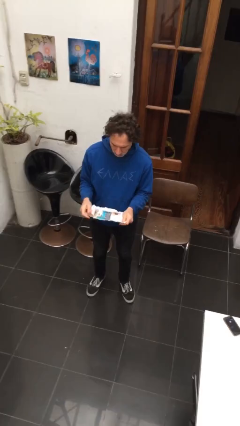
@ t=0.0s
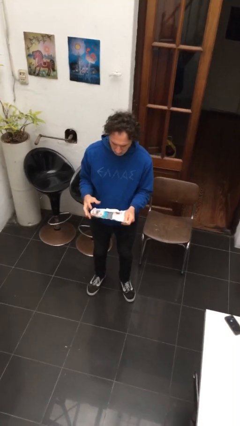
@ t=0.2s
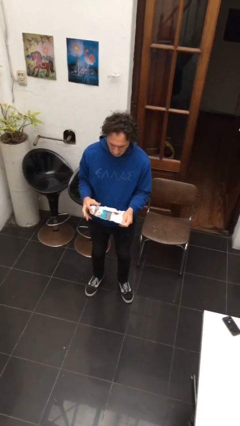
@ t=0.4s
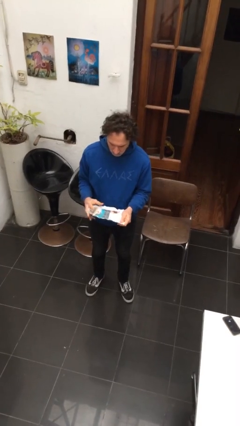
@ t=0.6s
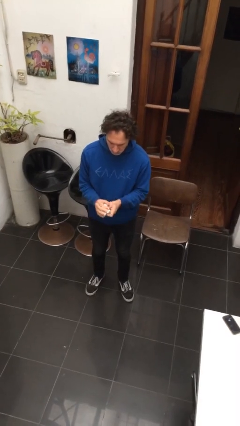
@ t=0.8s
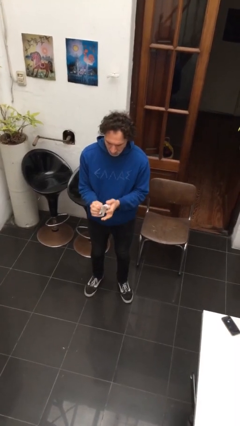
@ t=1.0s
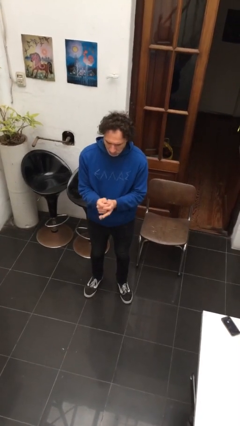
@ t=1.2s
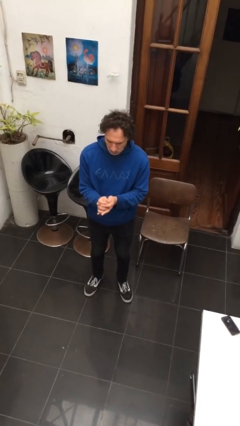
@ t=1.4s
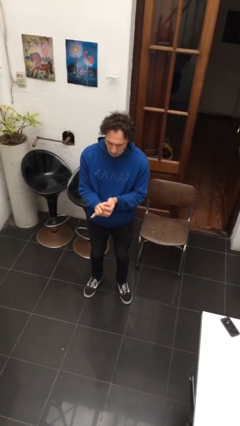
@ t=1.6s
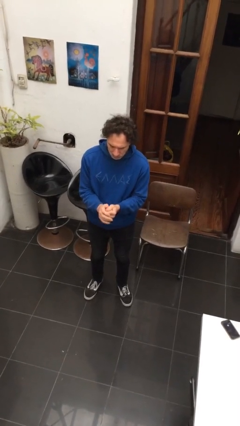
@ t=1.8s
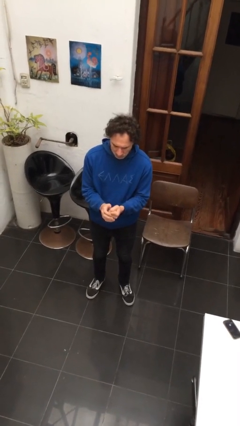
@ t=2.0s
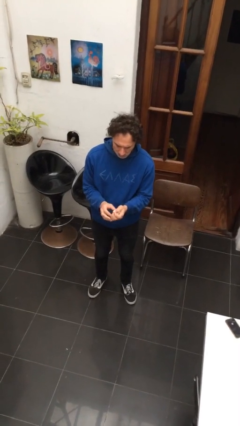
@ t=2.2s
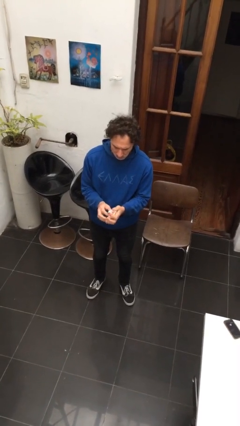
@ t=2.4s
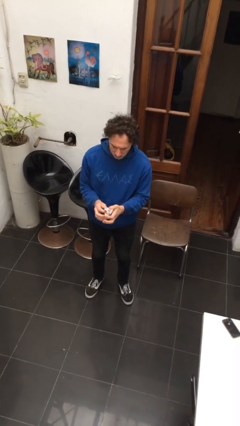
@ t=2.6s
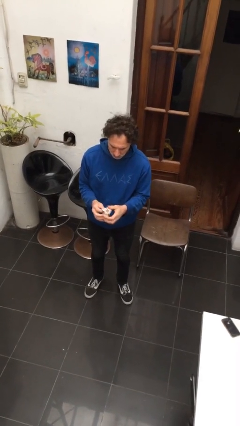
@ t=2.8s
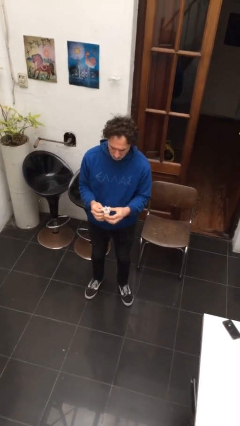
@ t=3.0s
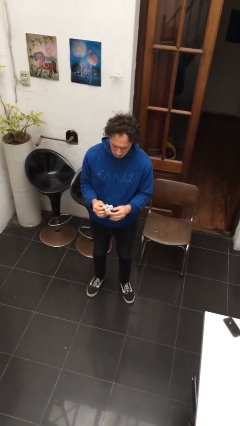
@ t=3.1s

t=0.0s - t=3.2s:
person crumples paper

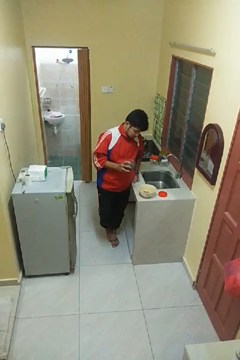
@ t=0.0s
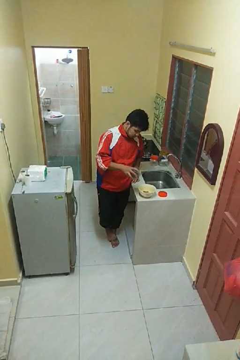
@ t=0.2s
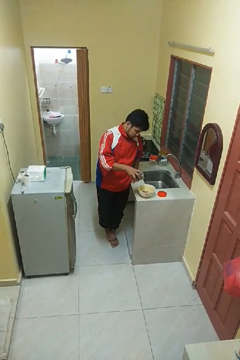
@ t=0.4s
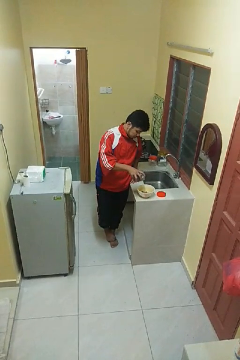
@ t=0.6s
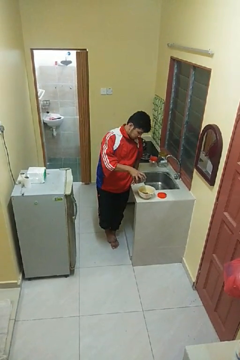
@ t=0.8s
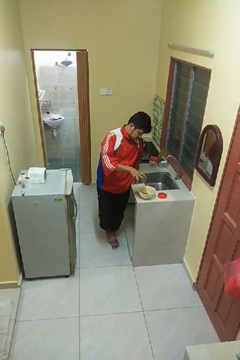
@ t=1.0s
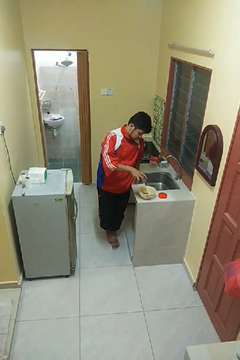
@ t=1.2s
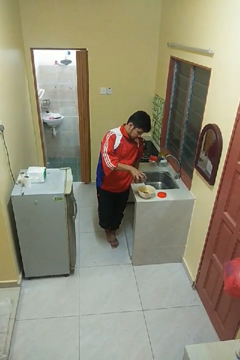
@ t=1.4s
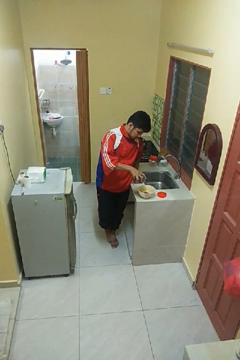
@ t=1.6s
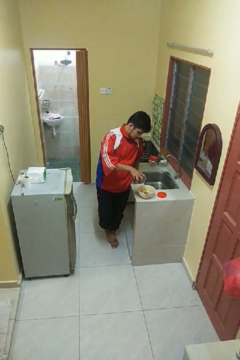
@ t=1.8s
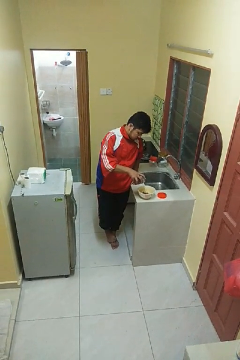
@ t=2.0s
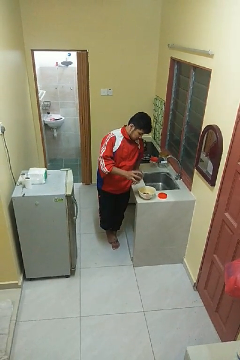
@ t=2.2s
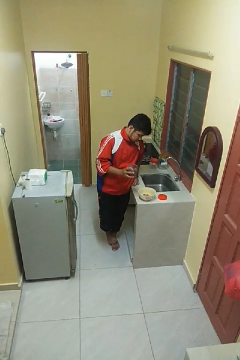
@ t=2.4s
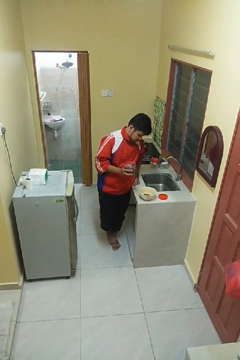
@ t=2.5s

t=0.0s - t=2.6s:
person pours into bowl

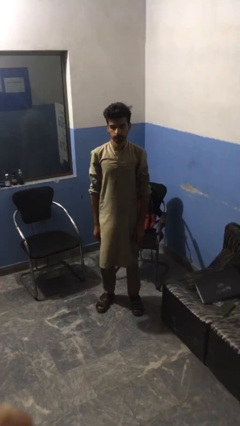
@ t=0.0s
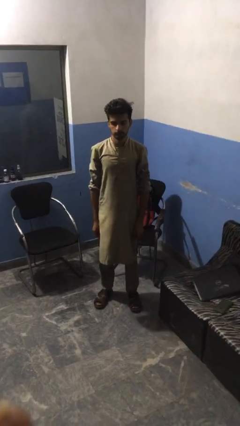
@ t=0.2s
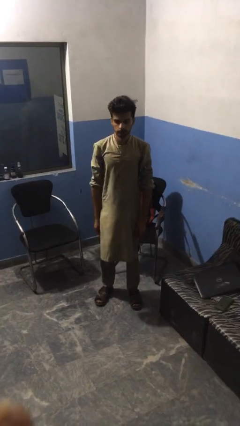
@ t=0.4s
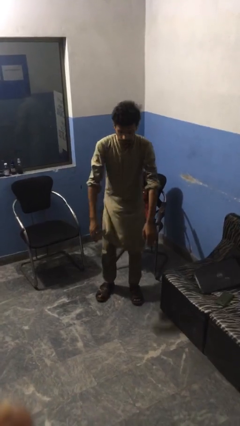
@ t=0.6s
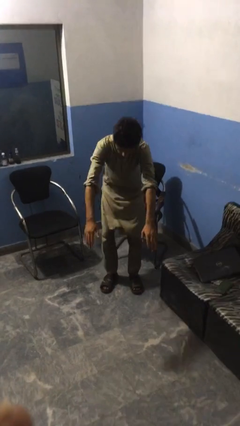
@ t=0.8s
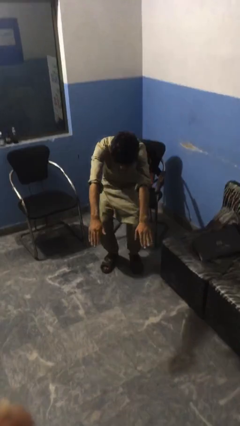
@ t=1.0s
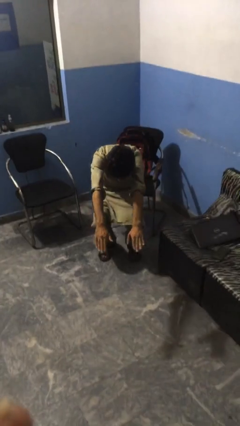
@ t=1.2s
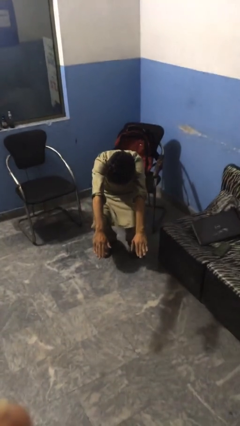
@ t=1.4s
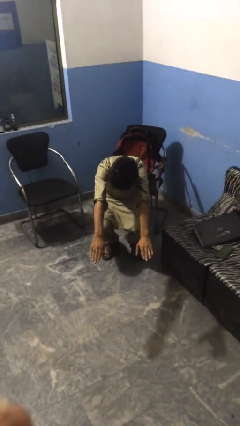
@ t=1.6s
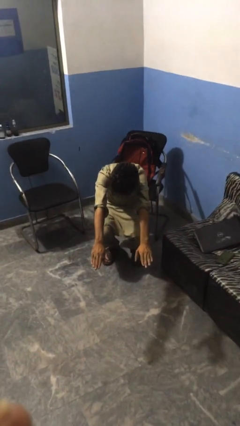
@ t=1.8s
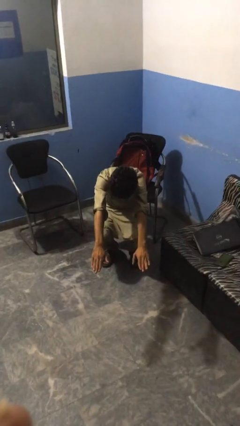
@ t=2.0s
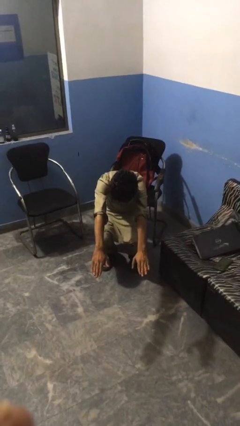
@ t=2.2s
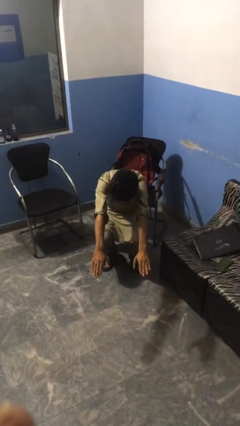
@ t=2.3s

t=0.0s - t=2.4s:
person squats

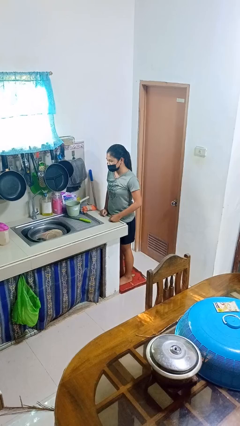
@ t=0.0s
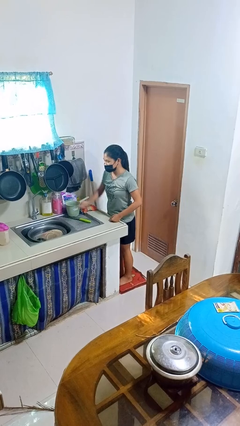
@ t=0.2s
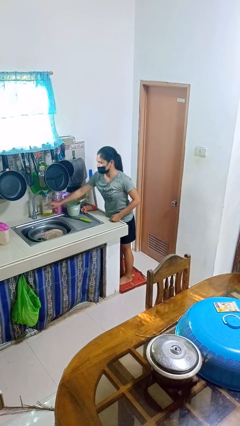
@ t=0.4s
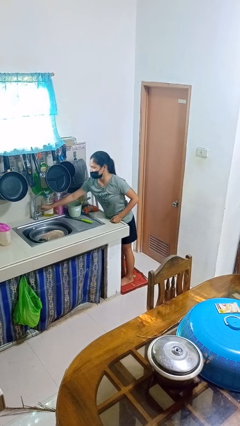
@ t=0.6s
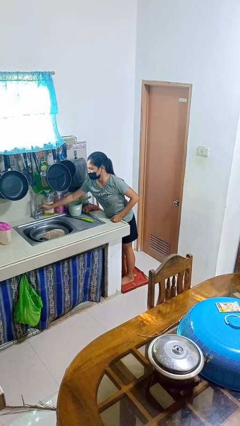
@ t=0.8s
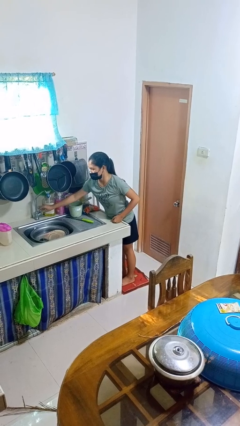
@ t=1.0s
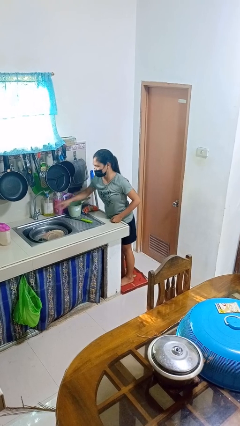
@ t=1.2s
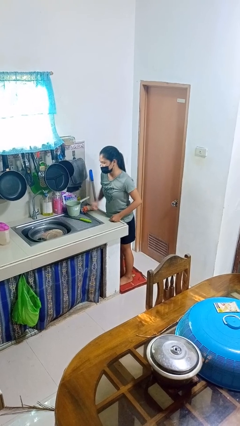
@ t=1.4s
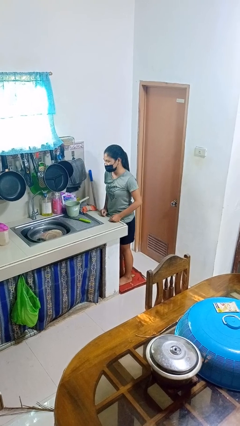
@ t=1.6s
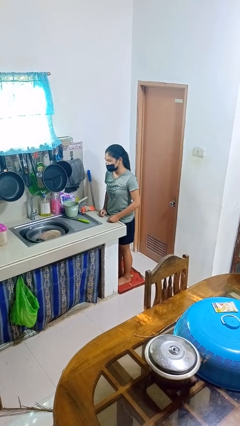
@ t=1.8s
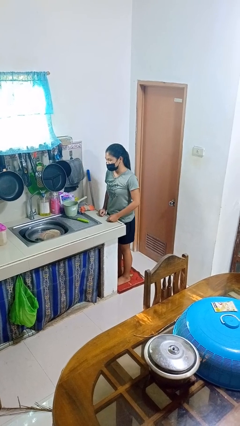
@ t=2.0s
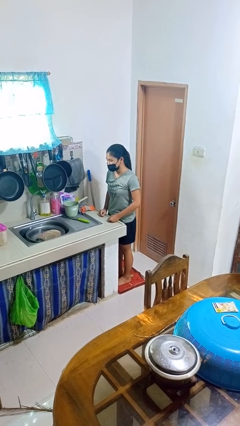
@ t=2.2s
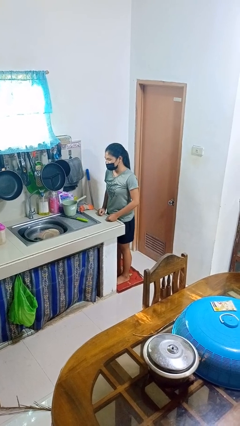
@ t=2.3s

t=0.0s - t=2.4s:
person turns on faucet

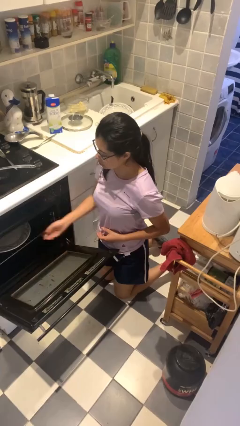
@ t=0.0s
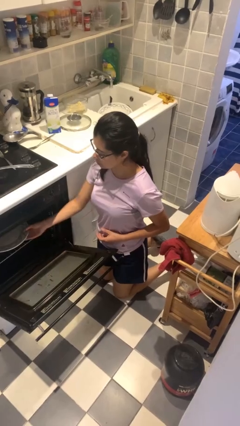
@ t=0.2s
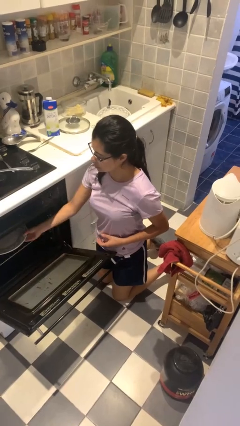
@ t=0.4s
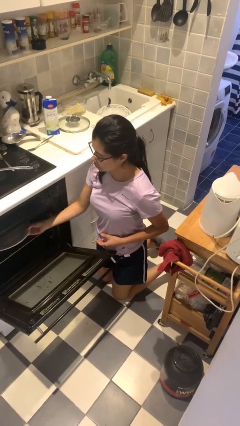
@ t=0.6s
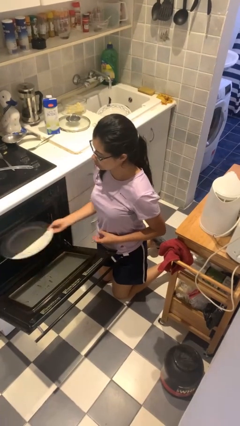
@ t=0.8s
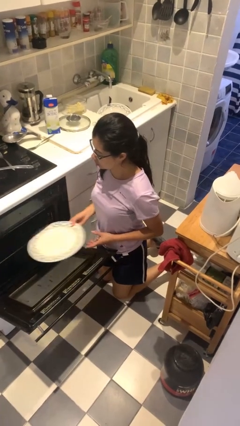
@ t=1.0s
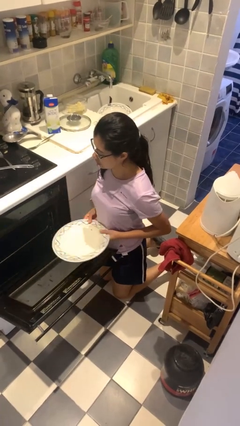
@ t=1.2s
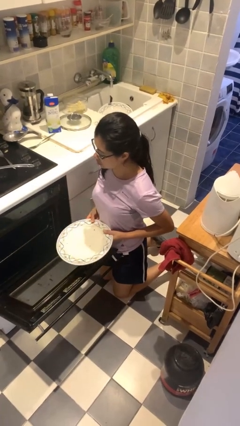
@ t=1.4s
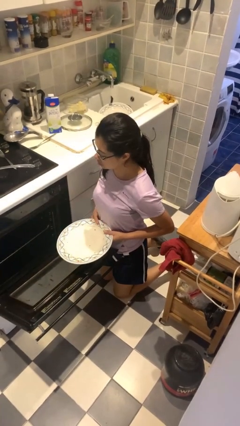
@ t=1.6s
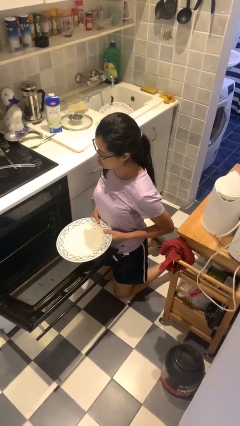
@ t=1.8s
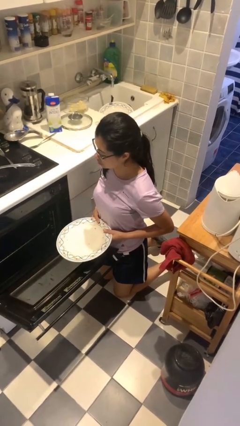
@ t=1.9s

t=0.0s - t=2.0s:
person unloads dishwasher

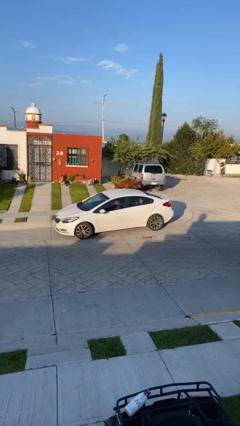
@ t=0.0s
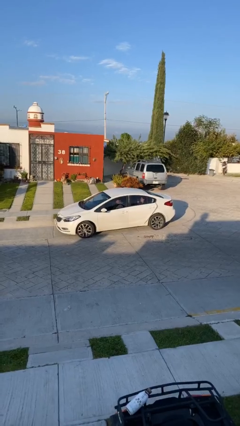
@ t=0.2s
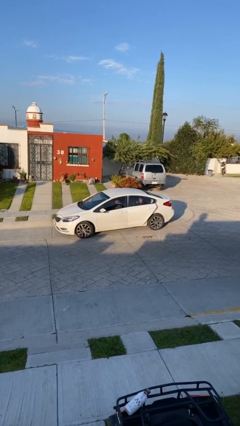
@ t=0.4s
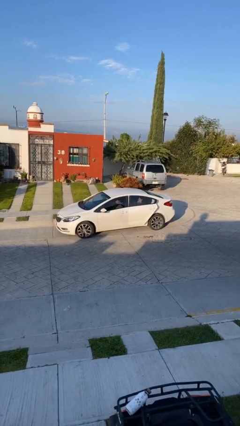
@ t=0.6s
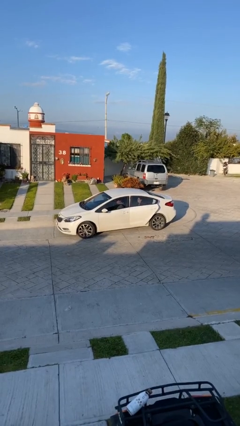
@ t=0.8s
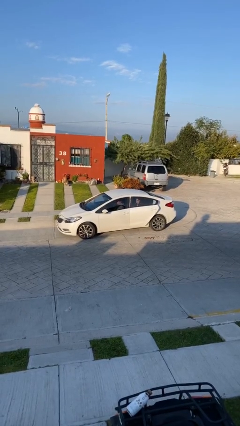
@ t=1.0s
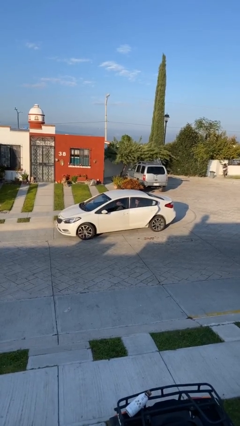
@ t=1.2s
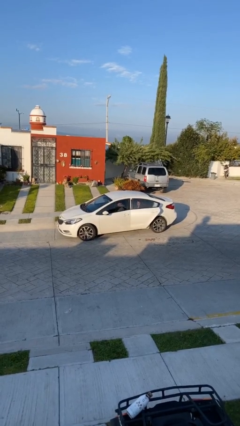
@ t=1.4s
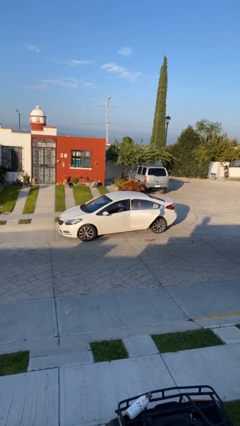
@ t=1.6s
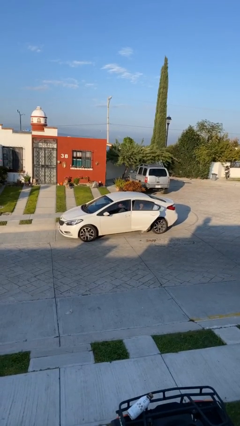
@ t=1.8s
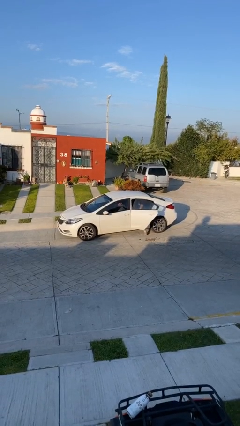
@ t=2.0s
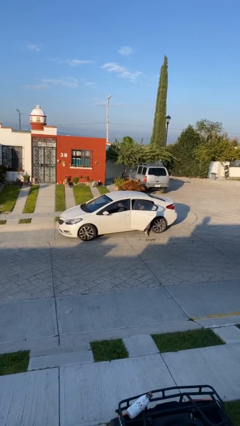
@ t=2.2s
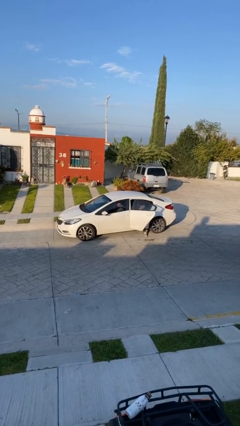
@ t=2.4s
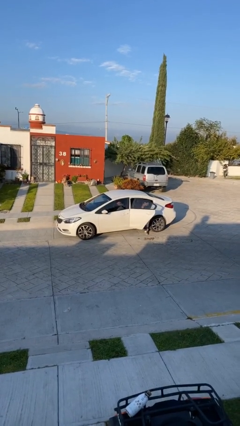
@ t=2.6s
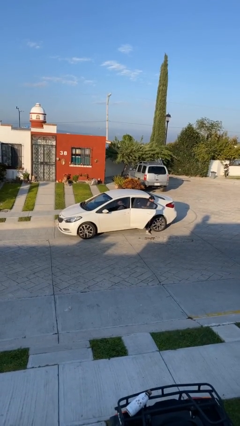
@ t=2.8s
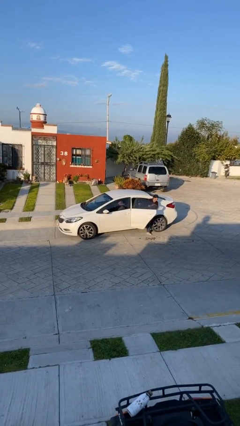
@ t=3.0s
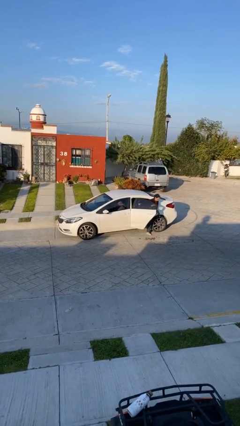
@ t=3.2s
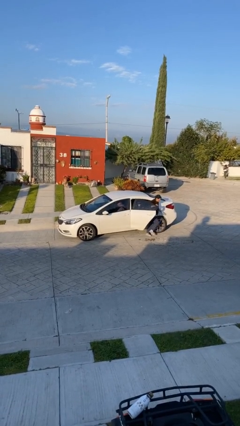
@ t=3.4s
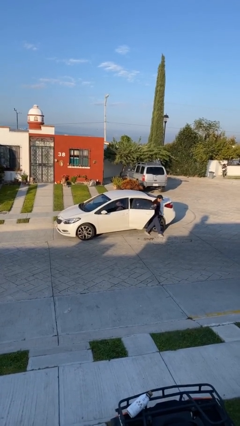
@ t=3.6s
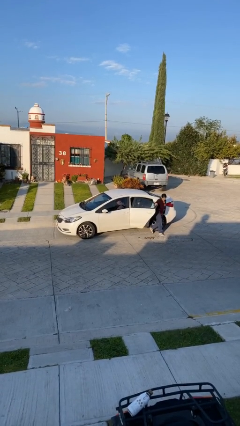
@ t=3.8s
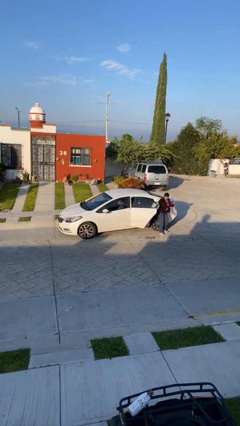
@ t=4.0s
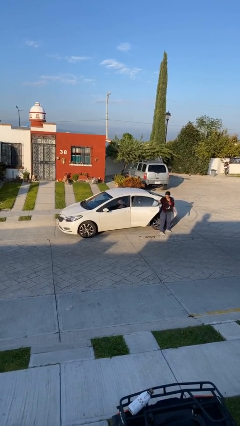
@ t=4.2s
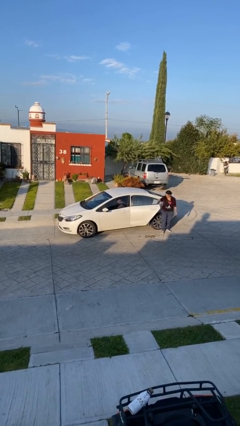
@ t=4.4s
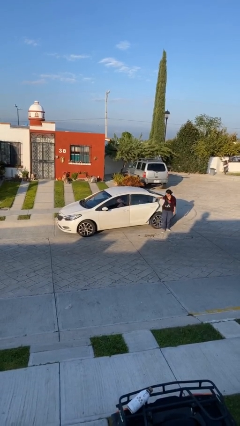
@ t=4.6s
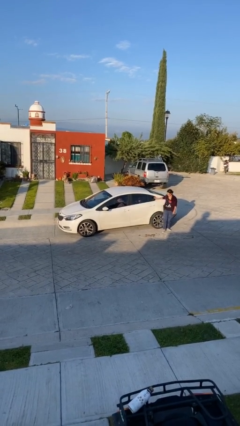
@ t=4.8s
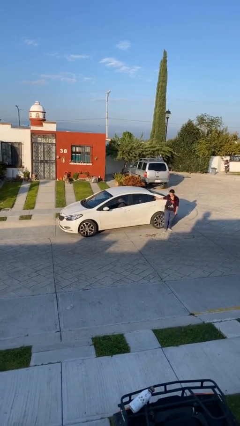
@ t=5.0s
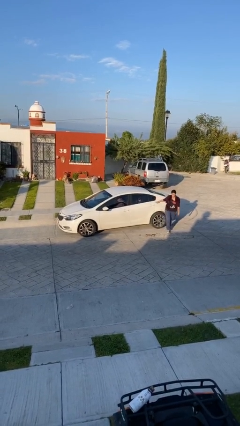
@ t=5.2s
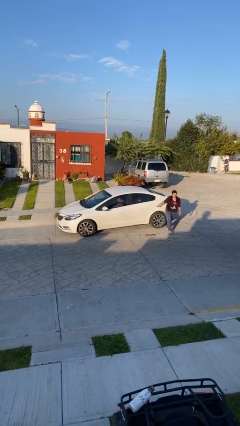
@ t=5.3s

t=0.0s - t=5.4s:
car drops off person
